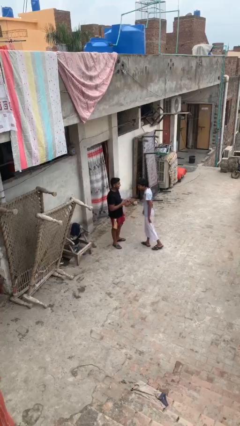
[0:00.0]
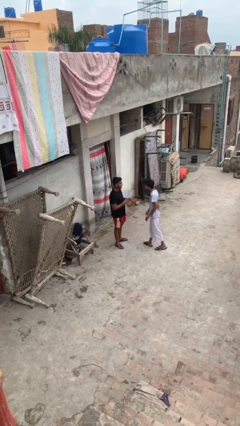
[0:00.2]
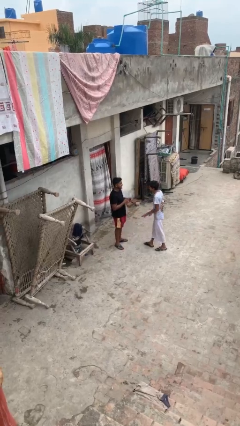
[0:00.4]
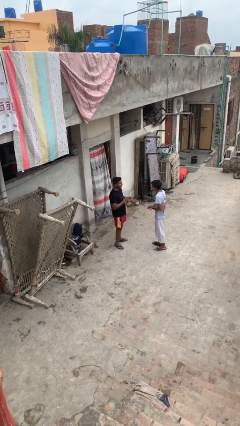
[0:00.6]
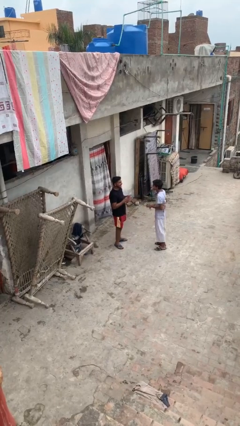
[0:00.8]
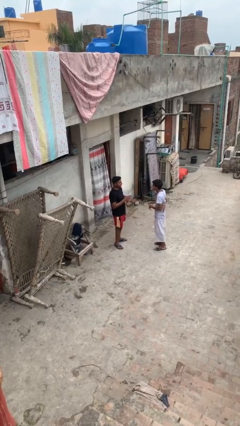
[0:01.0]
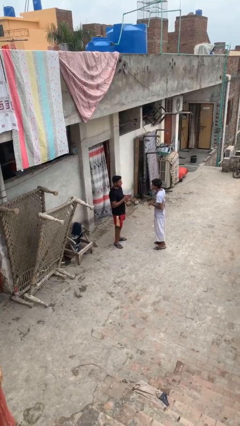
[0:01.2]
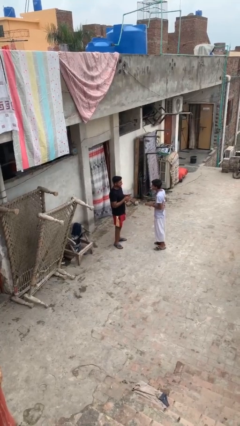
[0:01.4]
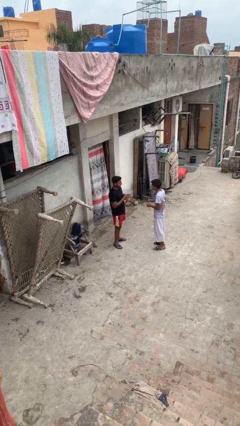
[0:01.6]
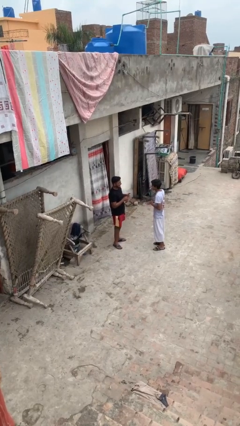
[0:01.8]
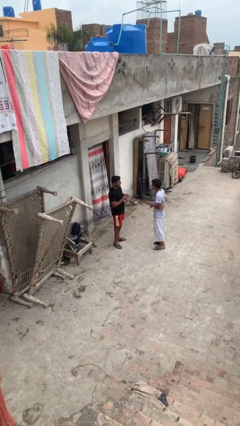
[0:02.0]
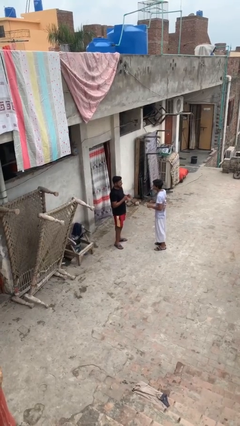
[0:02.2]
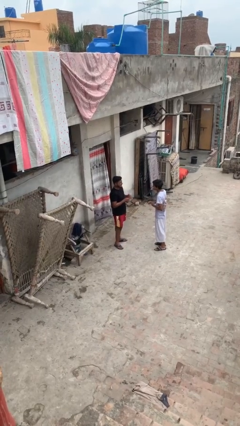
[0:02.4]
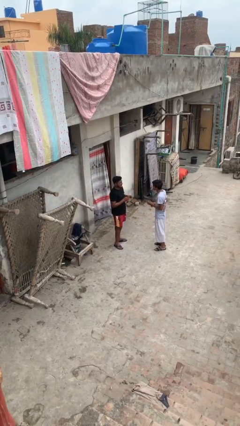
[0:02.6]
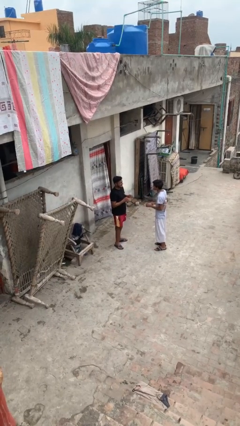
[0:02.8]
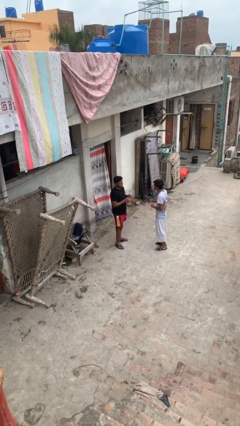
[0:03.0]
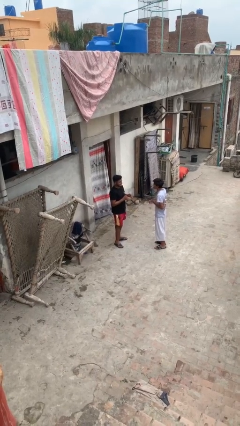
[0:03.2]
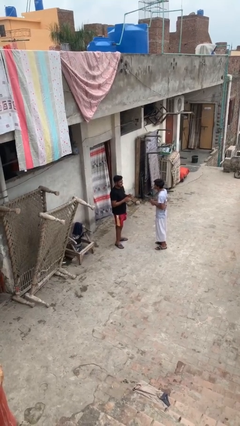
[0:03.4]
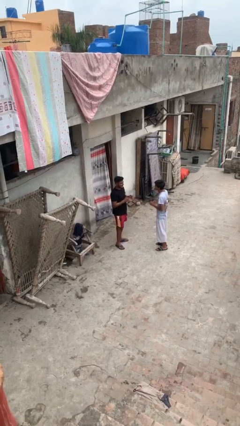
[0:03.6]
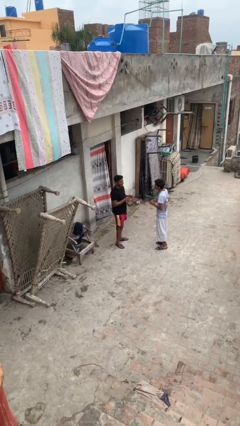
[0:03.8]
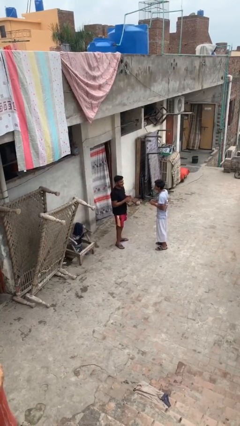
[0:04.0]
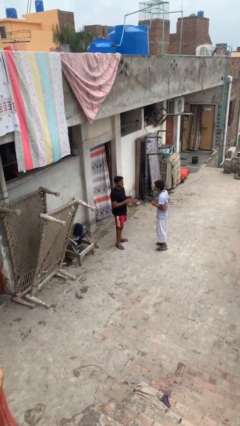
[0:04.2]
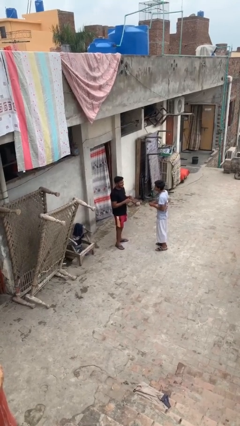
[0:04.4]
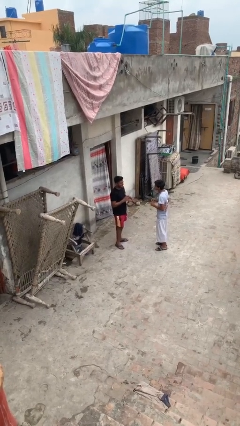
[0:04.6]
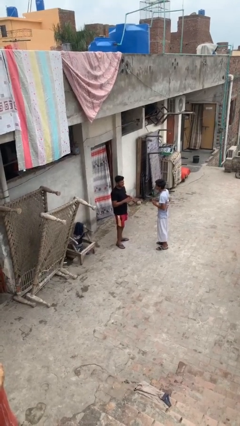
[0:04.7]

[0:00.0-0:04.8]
person talks to person

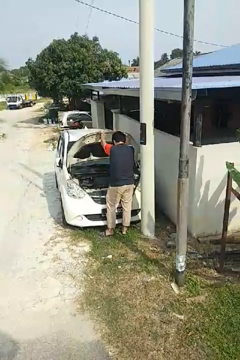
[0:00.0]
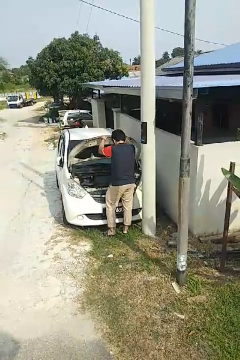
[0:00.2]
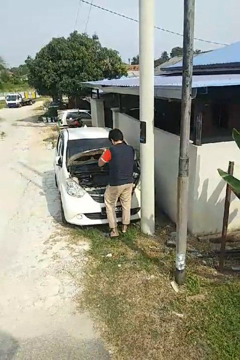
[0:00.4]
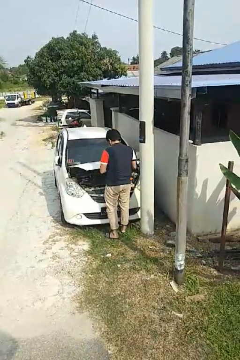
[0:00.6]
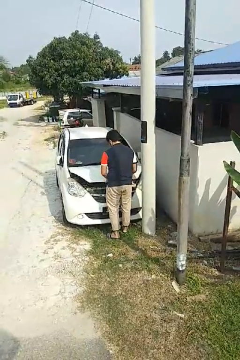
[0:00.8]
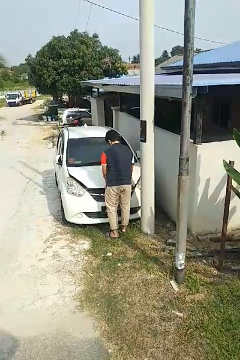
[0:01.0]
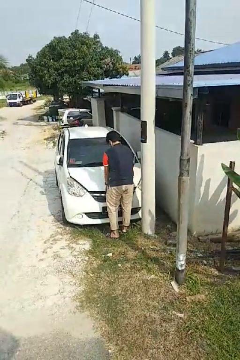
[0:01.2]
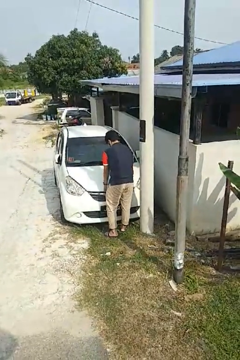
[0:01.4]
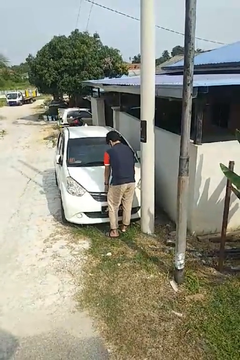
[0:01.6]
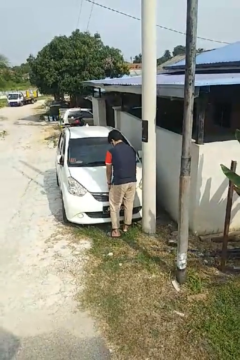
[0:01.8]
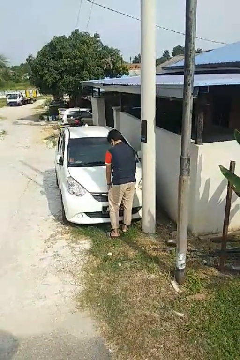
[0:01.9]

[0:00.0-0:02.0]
person closes car hood

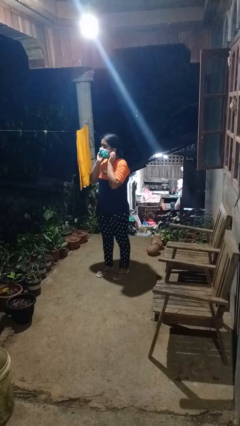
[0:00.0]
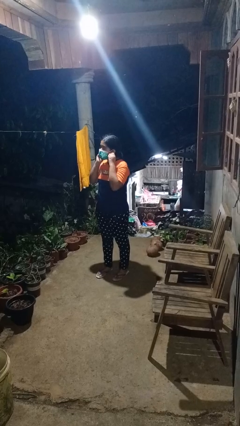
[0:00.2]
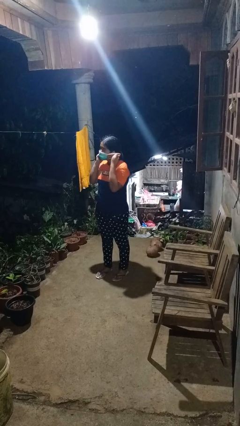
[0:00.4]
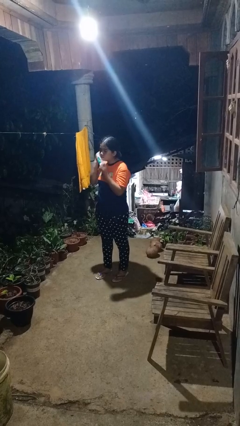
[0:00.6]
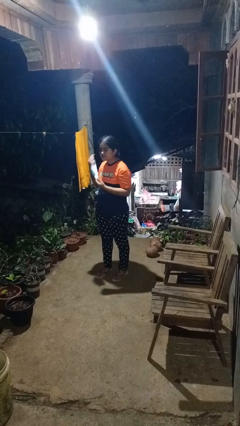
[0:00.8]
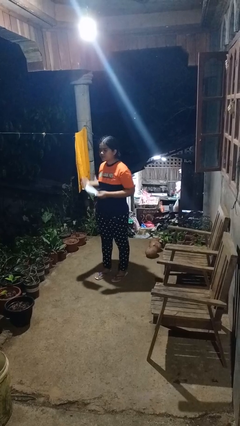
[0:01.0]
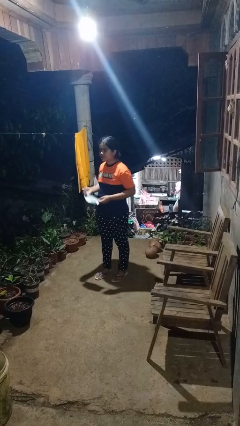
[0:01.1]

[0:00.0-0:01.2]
person takes off facemask

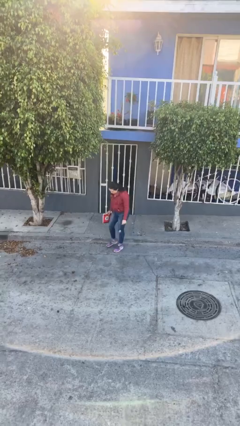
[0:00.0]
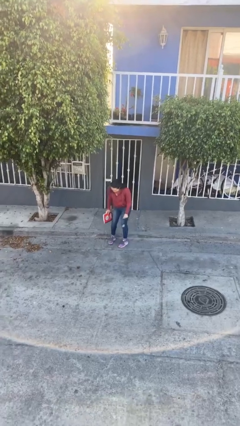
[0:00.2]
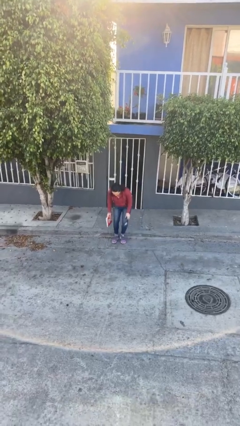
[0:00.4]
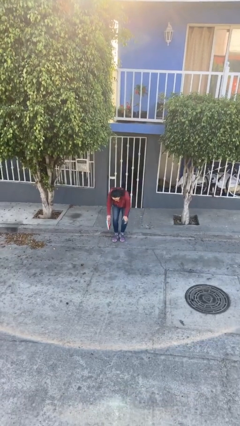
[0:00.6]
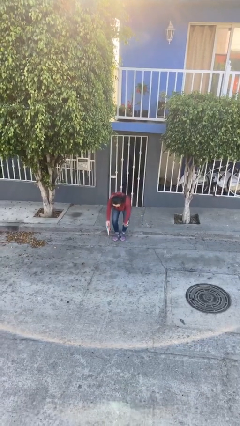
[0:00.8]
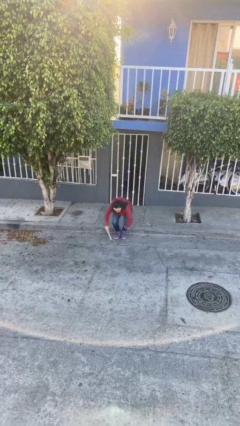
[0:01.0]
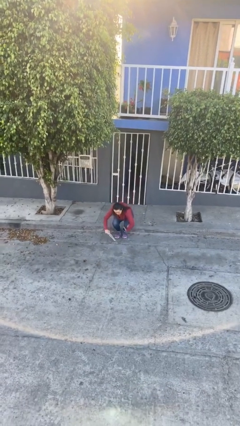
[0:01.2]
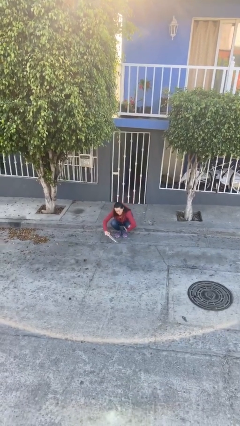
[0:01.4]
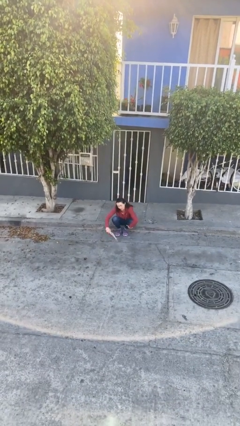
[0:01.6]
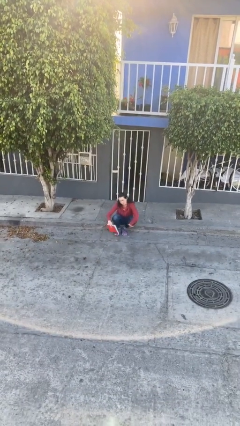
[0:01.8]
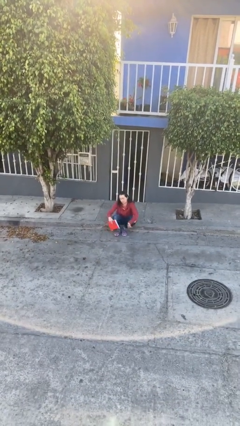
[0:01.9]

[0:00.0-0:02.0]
person sits down

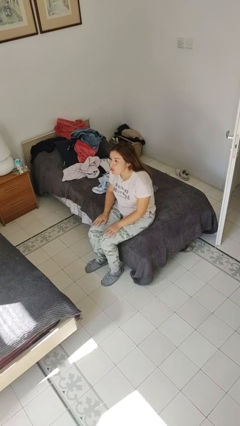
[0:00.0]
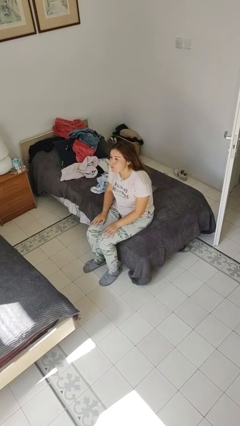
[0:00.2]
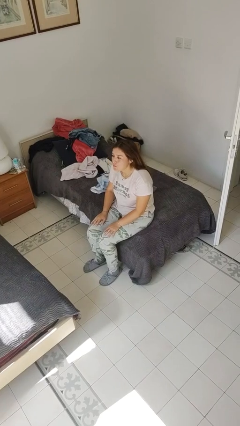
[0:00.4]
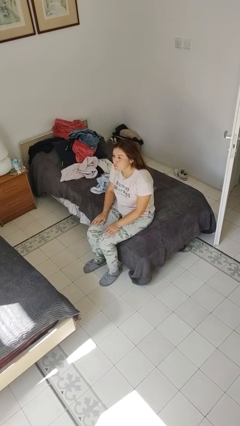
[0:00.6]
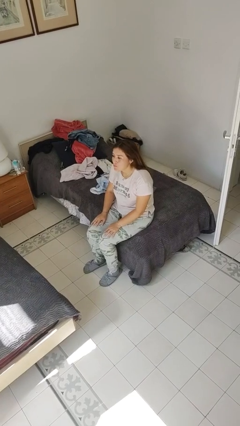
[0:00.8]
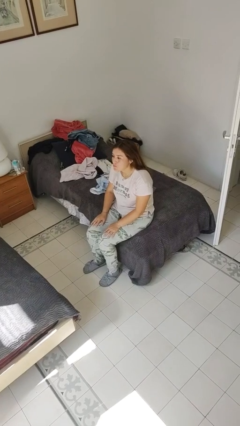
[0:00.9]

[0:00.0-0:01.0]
person sticks out tongue

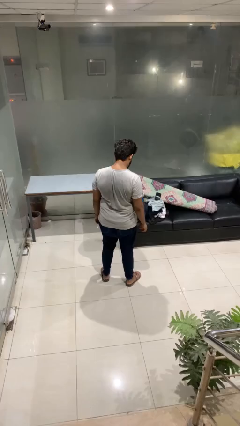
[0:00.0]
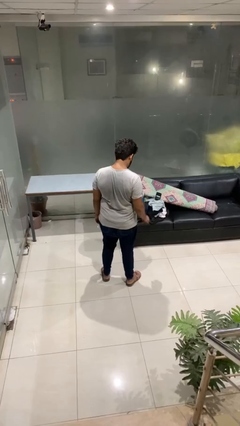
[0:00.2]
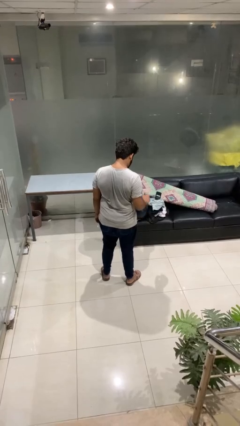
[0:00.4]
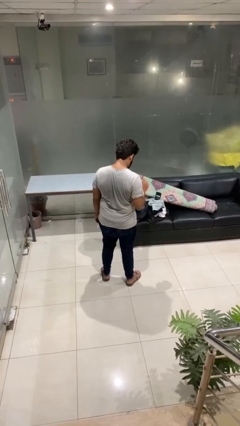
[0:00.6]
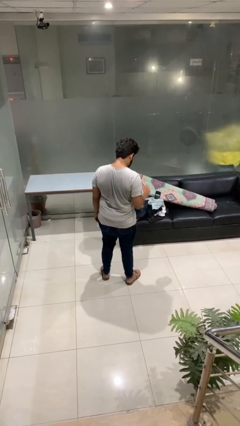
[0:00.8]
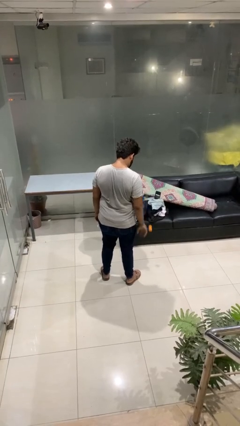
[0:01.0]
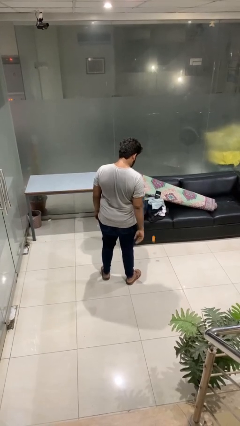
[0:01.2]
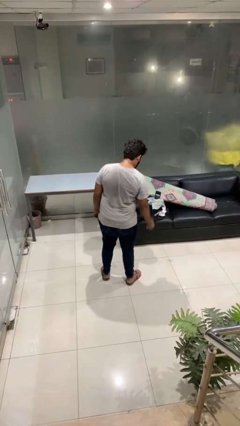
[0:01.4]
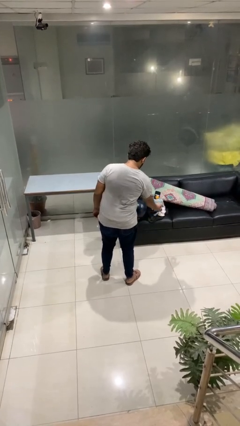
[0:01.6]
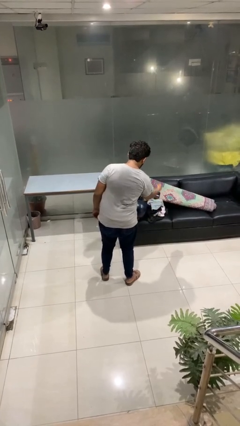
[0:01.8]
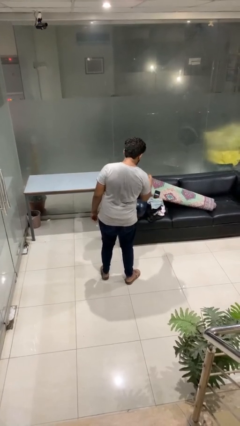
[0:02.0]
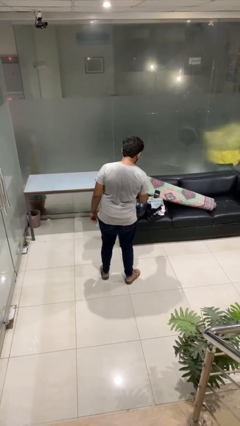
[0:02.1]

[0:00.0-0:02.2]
person bounces ball on floor

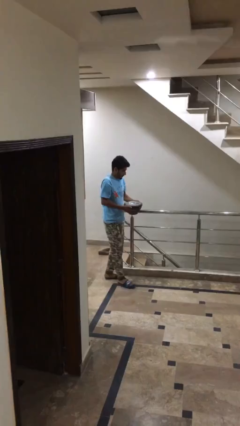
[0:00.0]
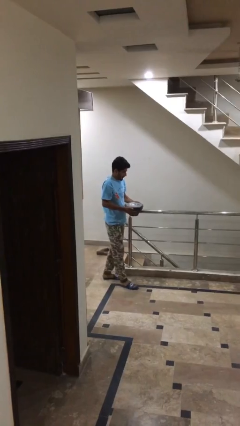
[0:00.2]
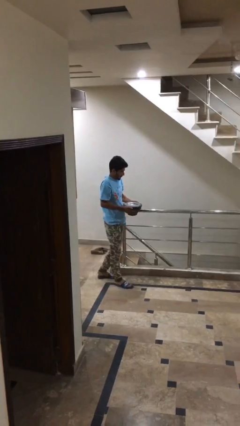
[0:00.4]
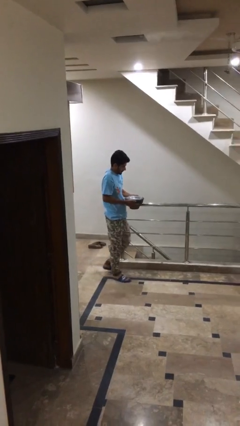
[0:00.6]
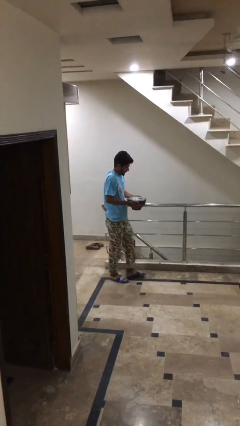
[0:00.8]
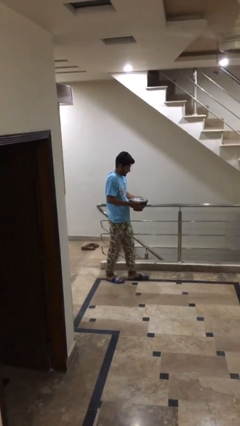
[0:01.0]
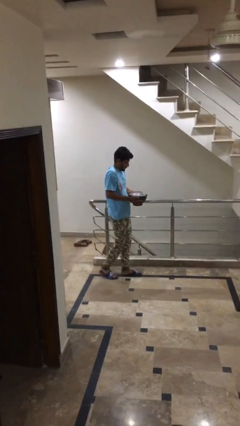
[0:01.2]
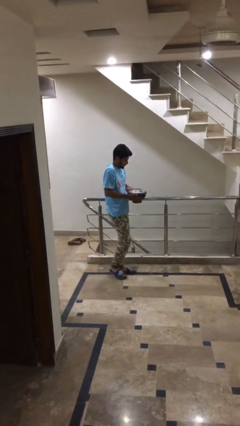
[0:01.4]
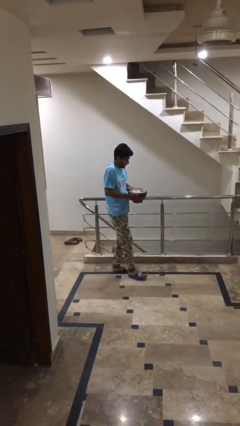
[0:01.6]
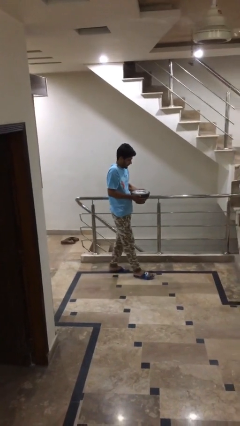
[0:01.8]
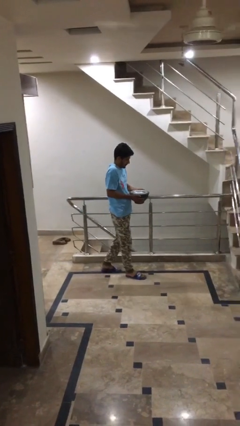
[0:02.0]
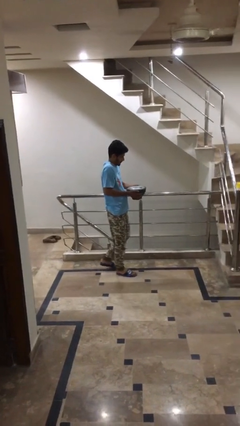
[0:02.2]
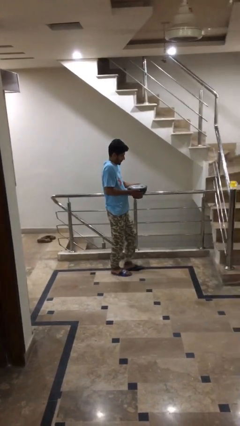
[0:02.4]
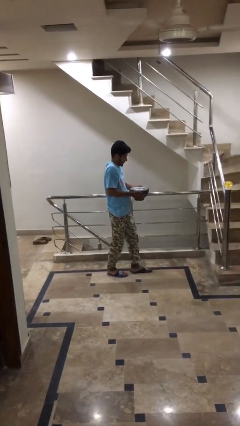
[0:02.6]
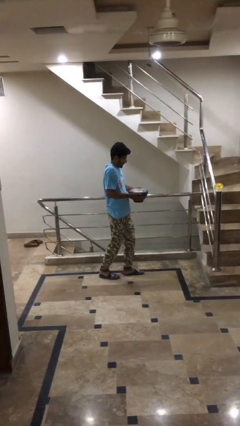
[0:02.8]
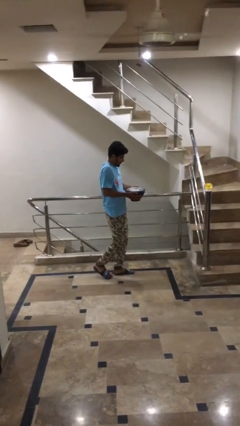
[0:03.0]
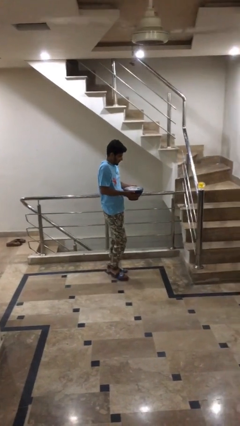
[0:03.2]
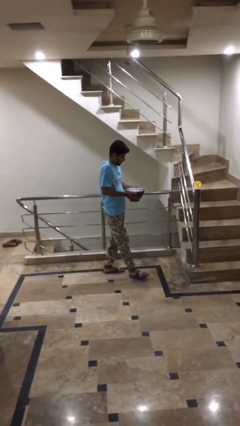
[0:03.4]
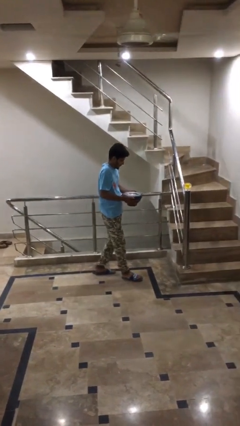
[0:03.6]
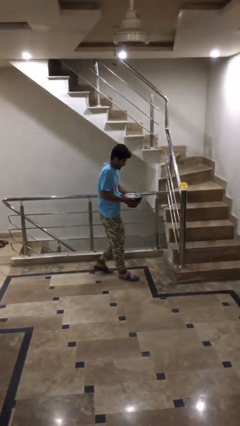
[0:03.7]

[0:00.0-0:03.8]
person carries heavy object
